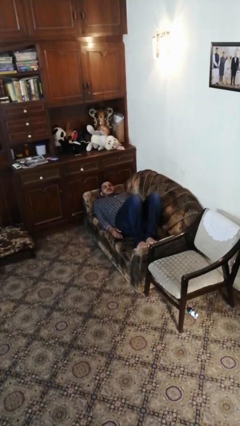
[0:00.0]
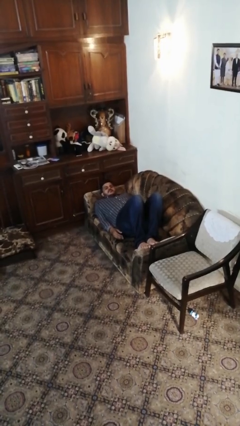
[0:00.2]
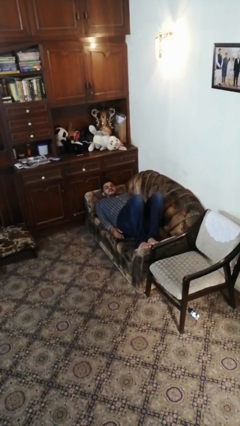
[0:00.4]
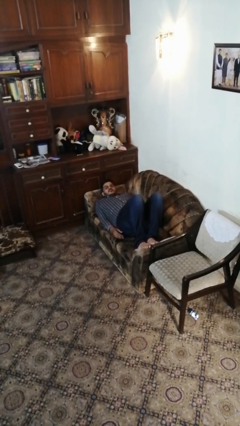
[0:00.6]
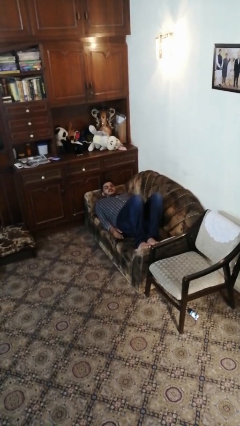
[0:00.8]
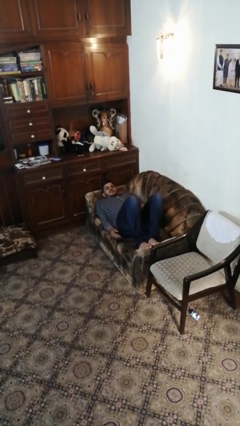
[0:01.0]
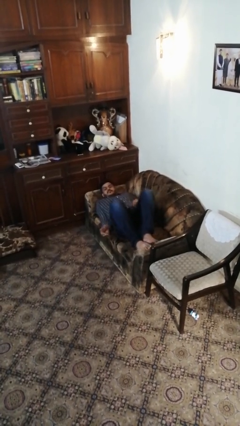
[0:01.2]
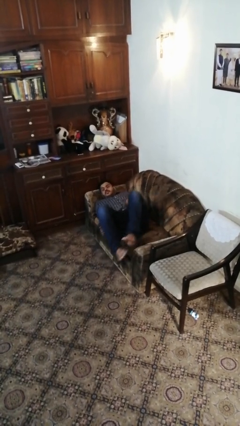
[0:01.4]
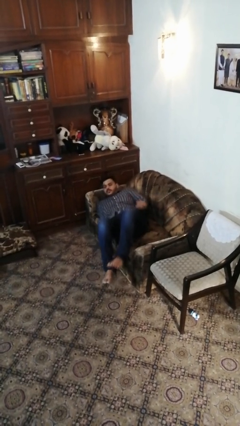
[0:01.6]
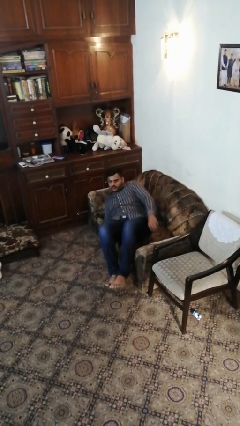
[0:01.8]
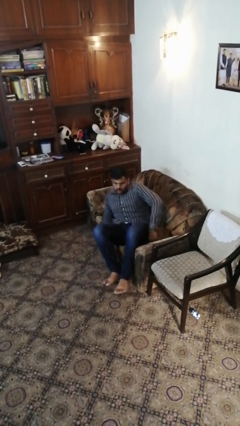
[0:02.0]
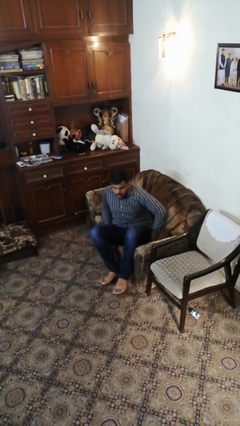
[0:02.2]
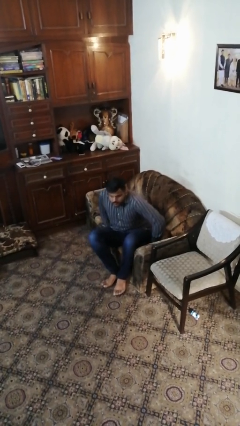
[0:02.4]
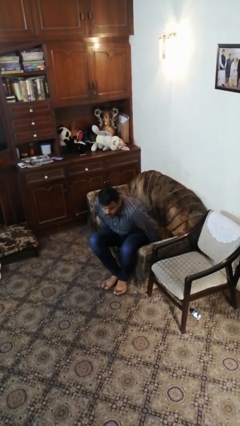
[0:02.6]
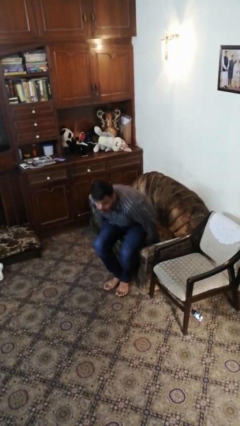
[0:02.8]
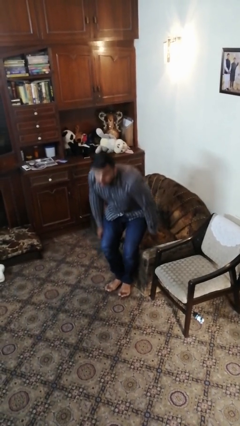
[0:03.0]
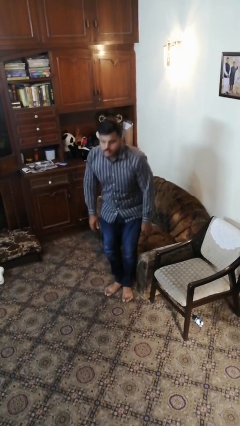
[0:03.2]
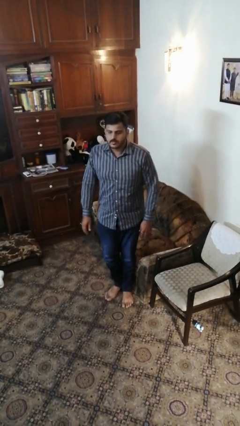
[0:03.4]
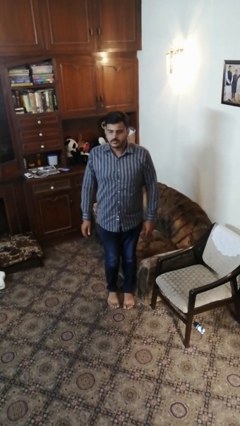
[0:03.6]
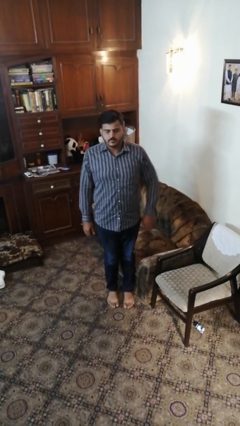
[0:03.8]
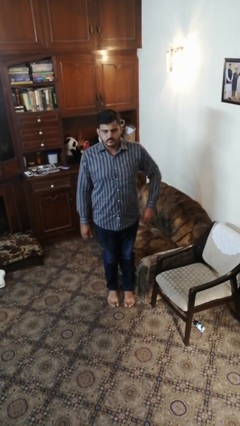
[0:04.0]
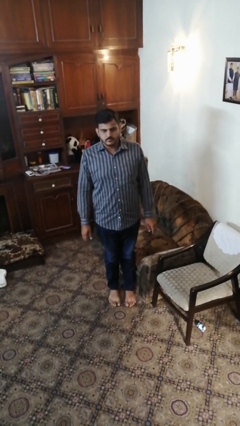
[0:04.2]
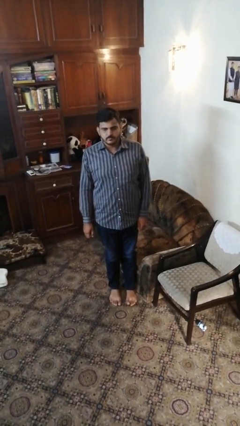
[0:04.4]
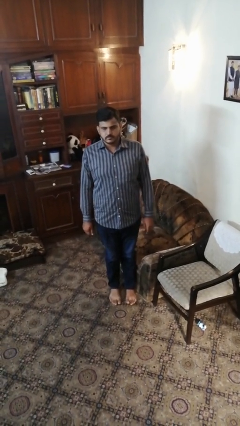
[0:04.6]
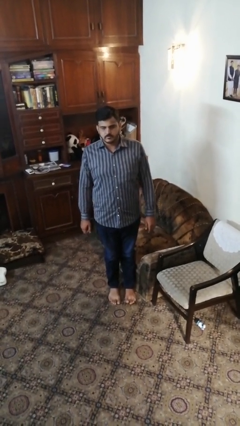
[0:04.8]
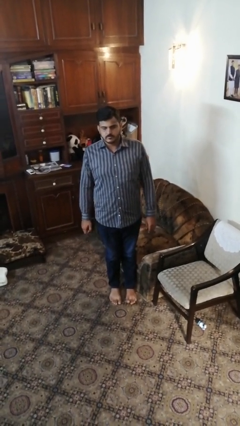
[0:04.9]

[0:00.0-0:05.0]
person stands up

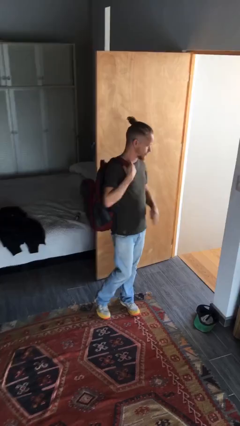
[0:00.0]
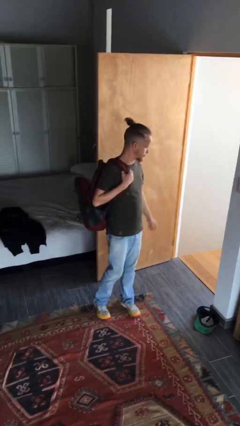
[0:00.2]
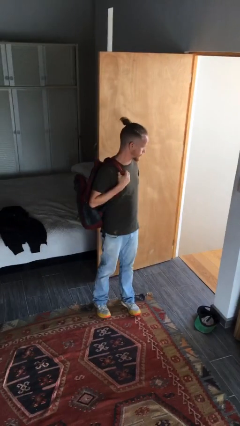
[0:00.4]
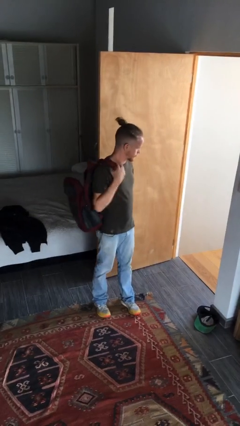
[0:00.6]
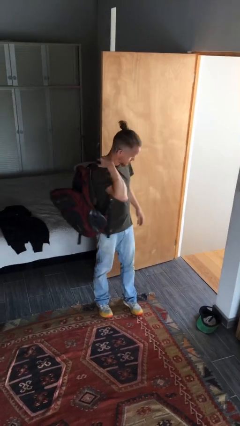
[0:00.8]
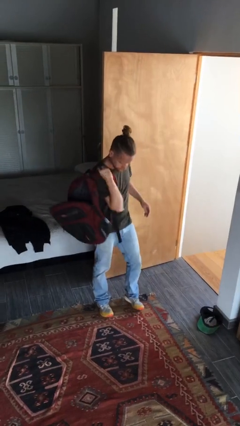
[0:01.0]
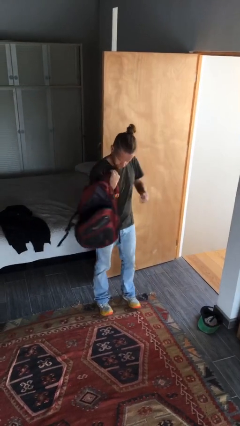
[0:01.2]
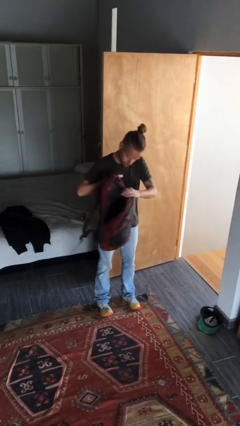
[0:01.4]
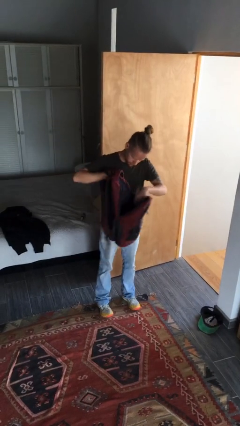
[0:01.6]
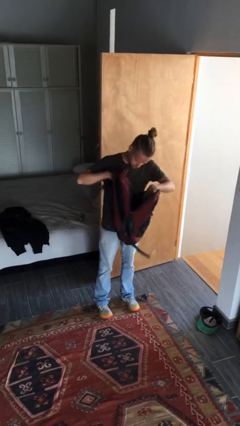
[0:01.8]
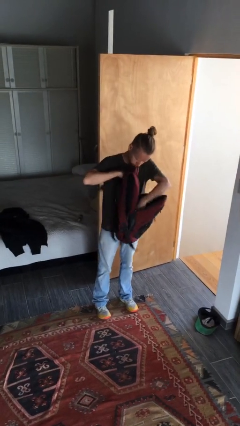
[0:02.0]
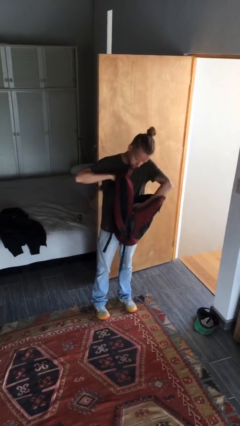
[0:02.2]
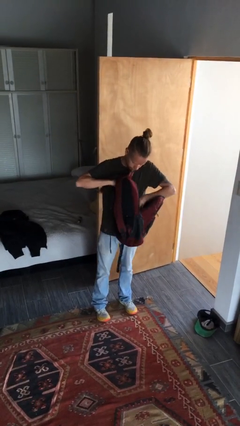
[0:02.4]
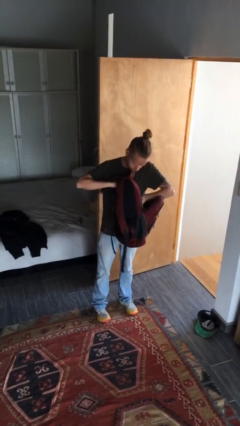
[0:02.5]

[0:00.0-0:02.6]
person searches in backpack

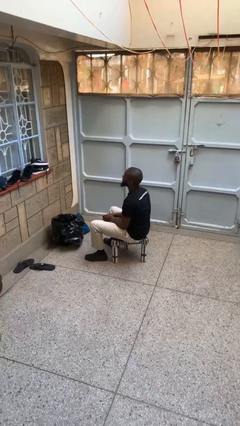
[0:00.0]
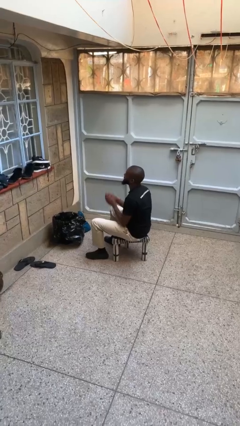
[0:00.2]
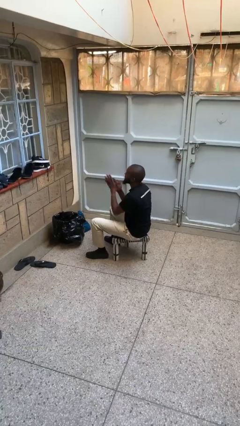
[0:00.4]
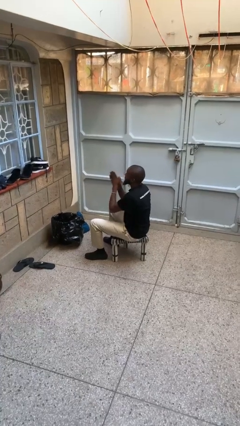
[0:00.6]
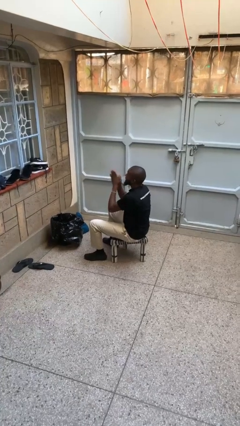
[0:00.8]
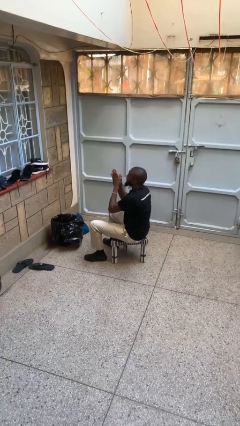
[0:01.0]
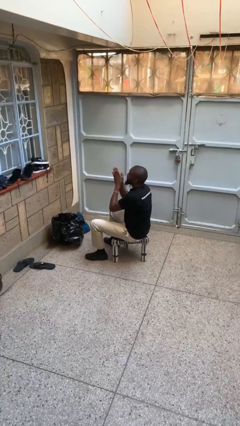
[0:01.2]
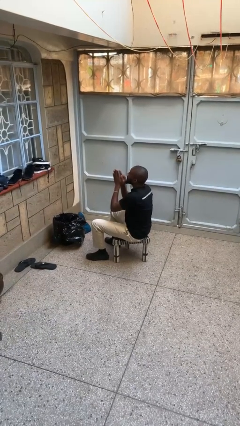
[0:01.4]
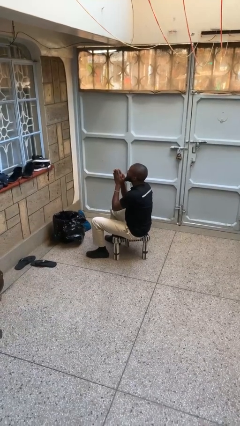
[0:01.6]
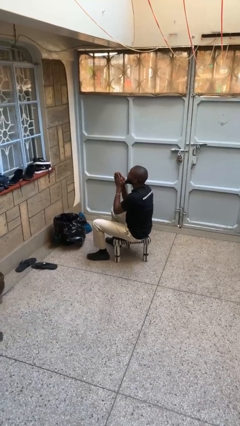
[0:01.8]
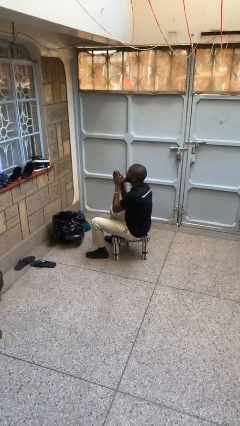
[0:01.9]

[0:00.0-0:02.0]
person blows into hands

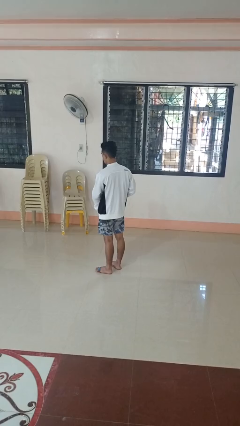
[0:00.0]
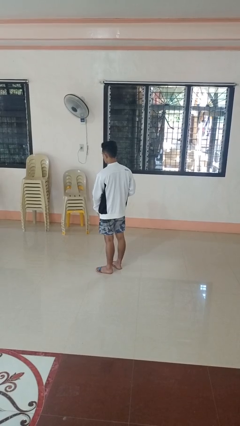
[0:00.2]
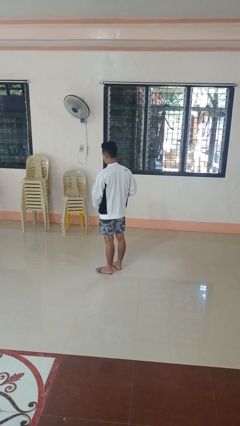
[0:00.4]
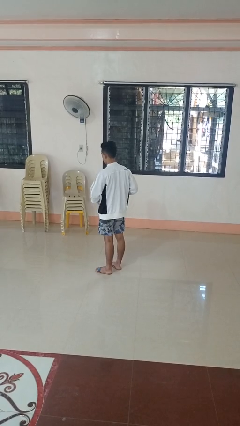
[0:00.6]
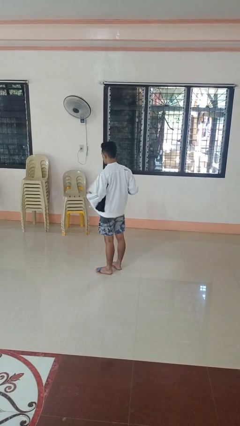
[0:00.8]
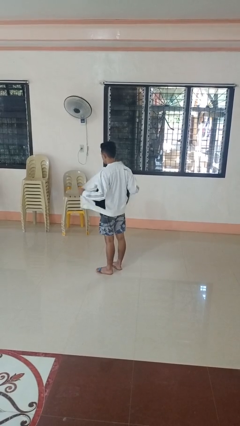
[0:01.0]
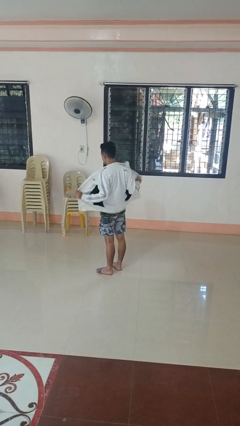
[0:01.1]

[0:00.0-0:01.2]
person unzips jacket

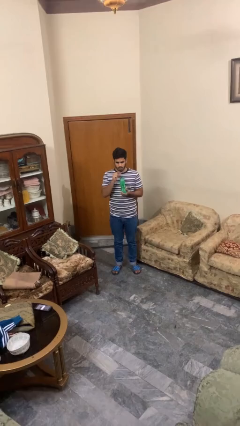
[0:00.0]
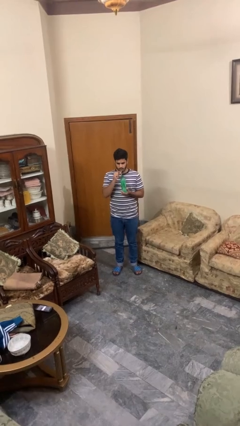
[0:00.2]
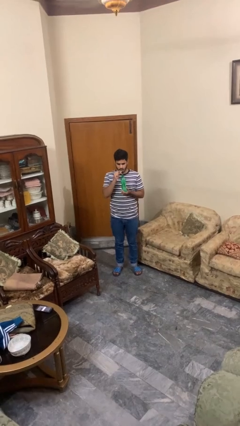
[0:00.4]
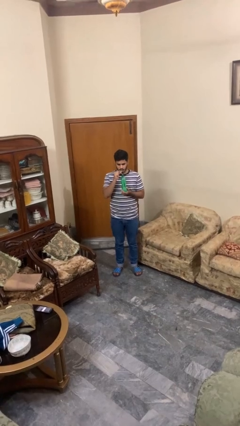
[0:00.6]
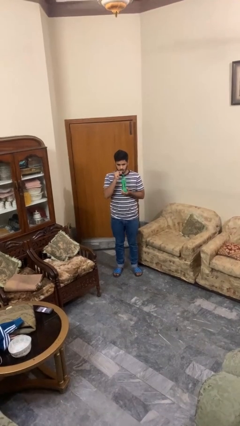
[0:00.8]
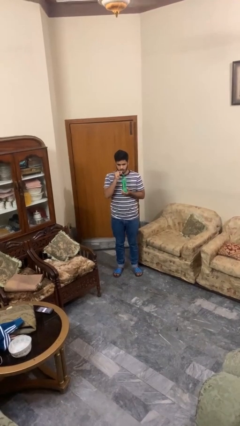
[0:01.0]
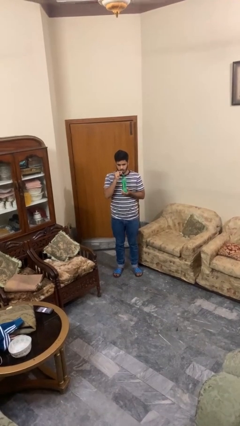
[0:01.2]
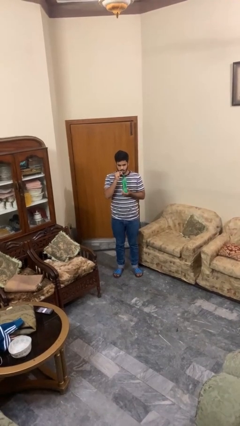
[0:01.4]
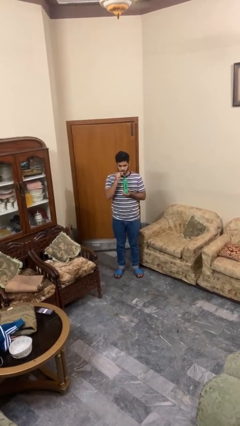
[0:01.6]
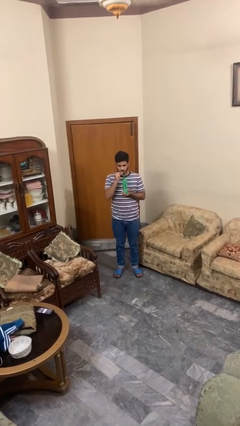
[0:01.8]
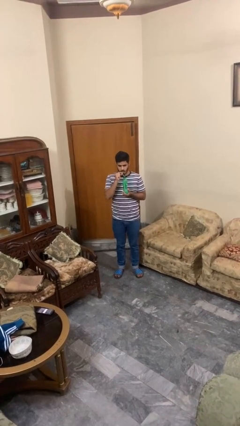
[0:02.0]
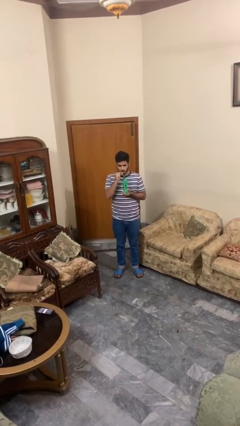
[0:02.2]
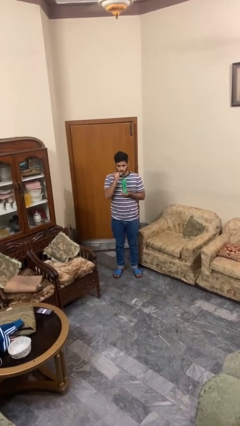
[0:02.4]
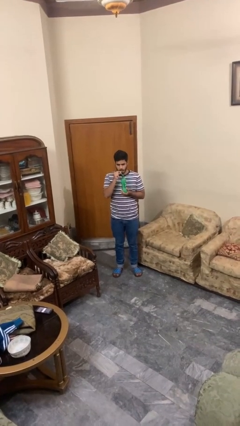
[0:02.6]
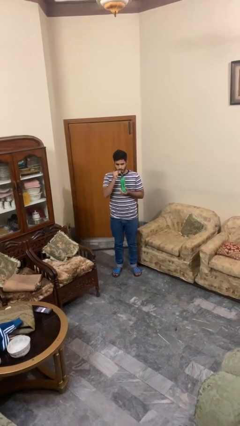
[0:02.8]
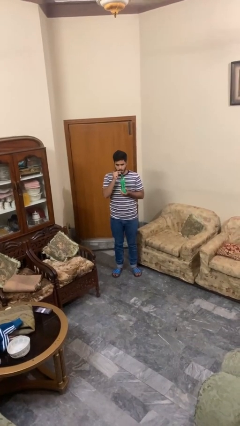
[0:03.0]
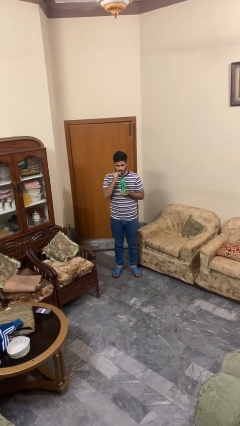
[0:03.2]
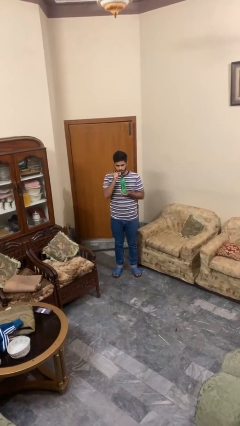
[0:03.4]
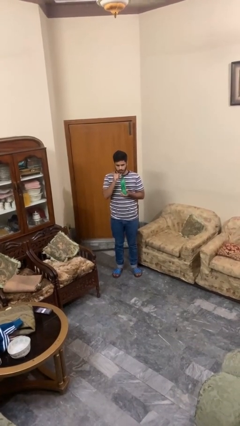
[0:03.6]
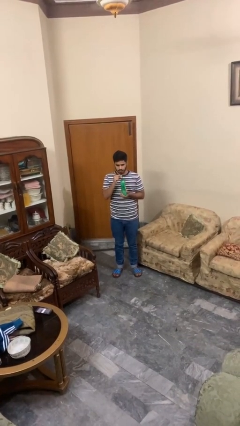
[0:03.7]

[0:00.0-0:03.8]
person drinks from straw

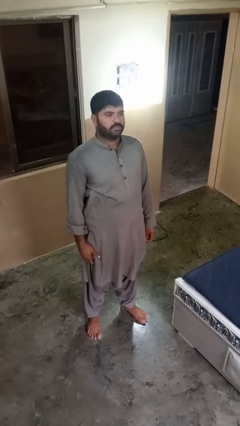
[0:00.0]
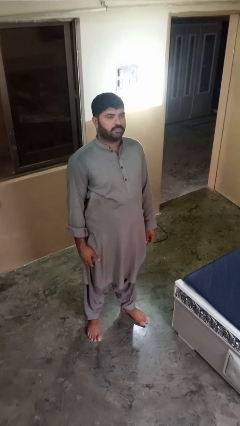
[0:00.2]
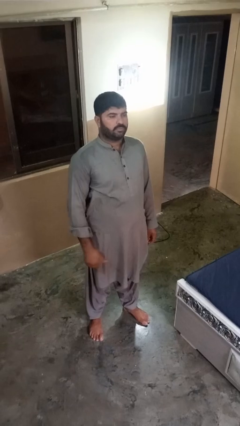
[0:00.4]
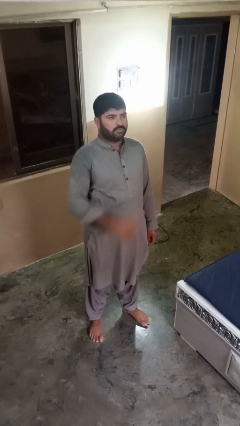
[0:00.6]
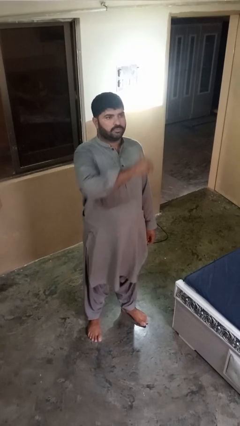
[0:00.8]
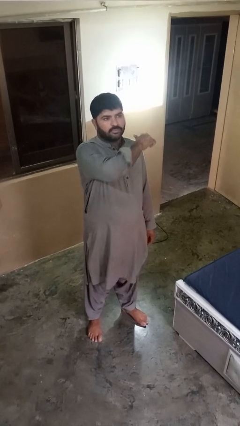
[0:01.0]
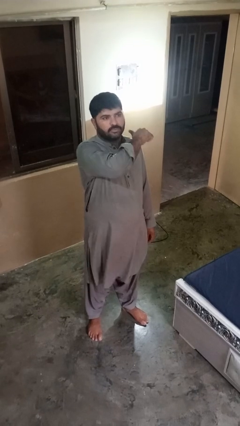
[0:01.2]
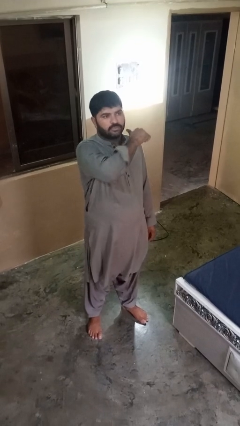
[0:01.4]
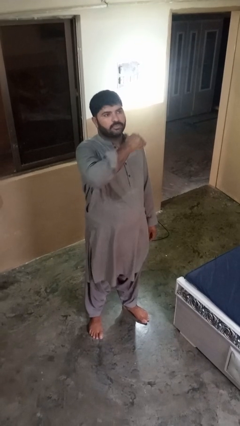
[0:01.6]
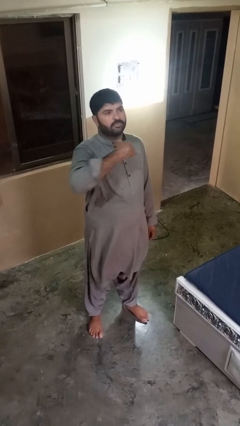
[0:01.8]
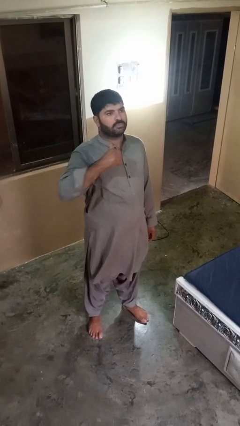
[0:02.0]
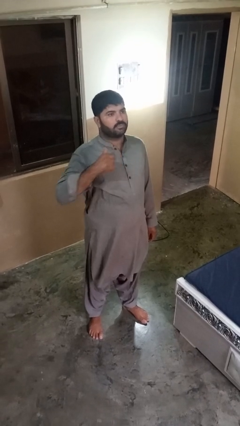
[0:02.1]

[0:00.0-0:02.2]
person gestures cut

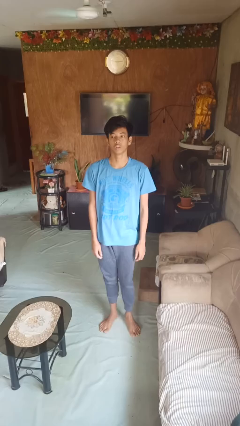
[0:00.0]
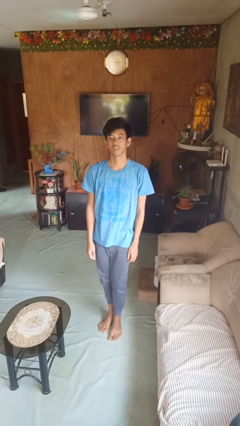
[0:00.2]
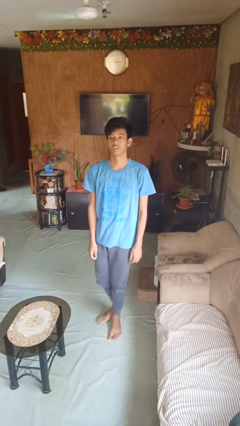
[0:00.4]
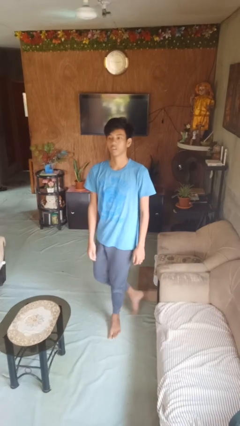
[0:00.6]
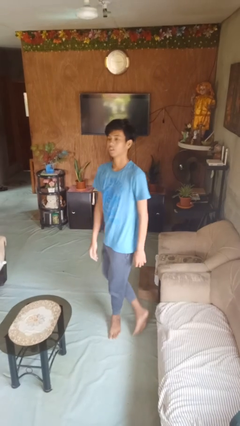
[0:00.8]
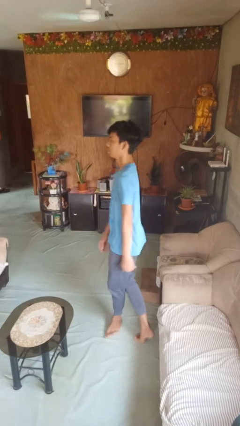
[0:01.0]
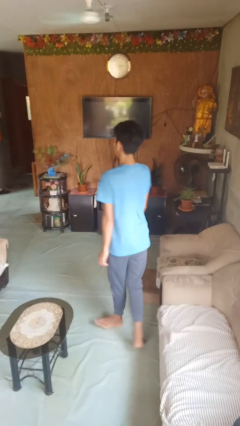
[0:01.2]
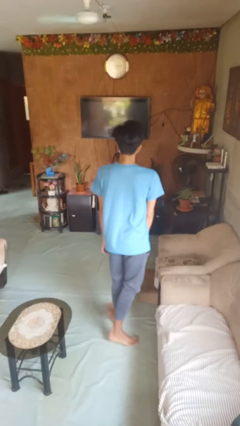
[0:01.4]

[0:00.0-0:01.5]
person twirls
